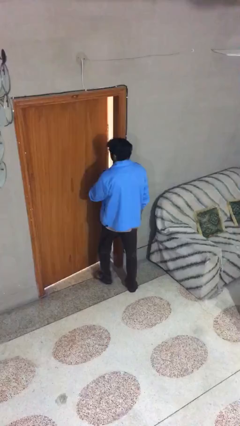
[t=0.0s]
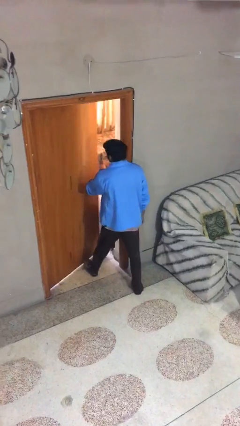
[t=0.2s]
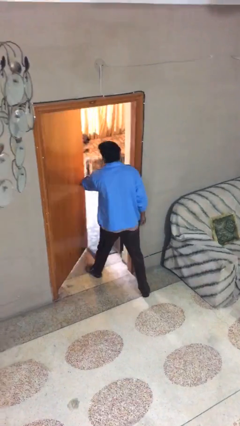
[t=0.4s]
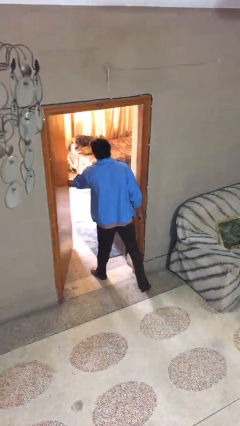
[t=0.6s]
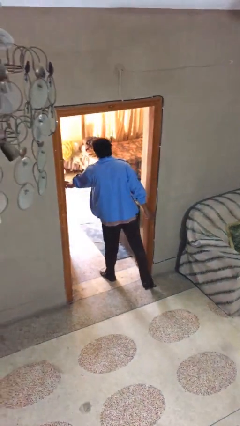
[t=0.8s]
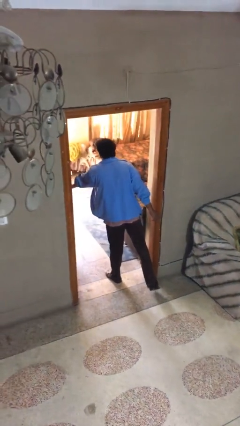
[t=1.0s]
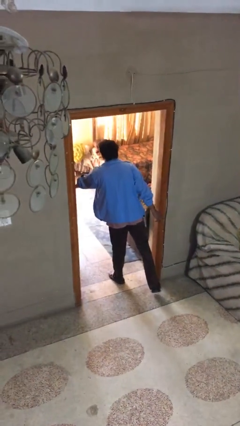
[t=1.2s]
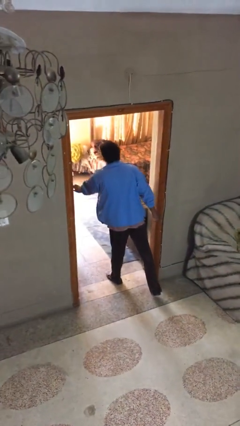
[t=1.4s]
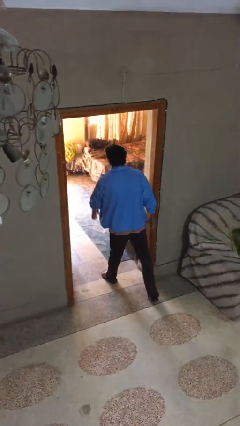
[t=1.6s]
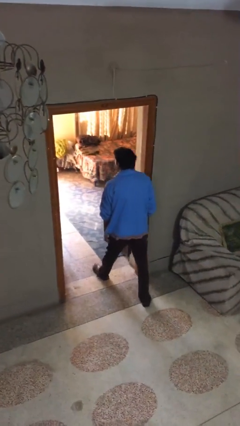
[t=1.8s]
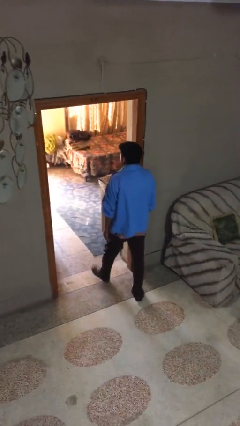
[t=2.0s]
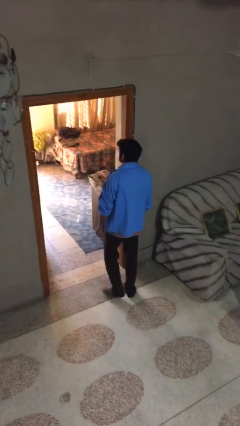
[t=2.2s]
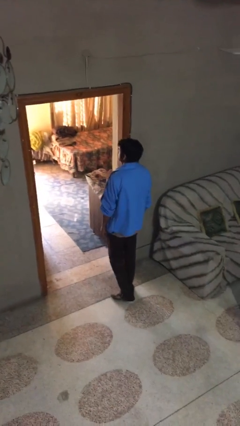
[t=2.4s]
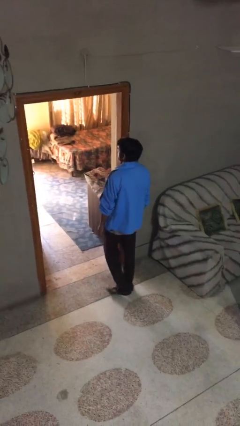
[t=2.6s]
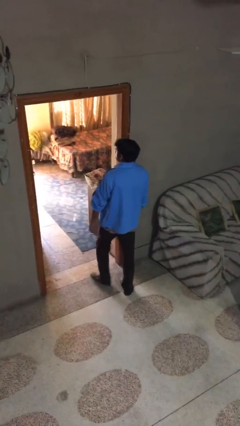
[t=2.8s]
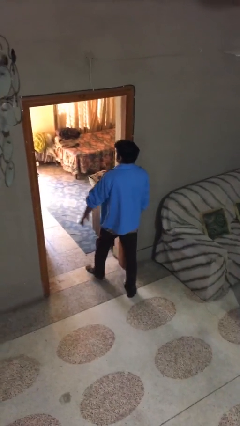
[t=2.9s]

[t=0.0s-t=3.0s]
person opens facility door

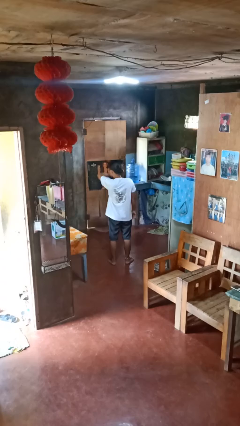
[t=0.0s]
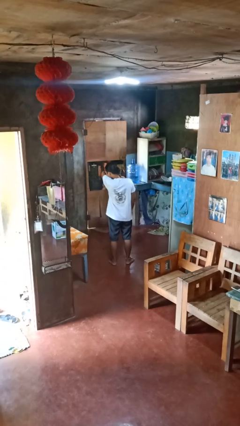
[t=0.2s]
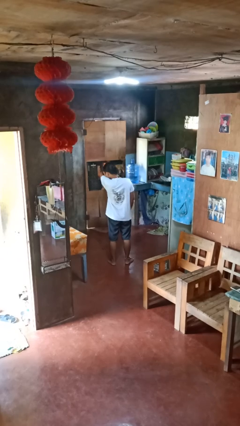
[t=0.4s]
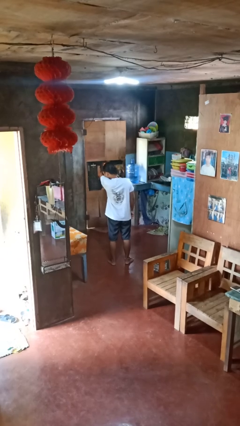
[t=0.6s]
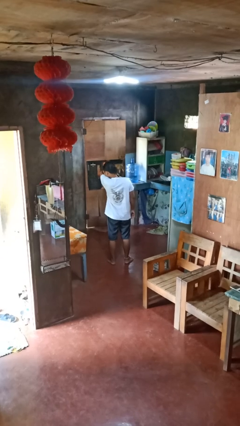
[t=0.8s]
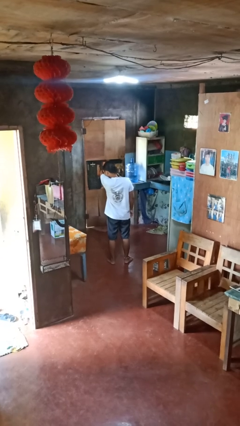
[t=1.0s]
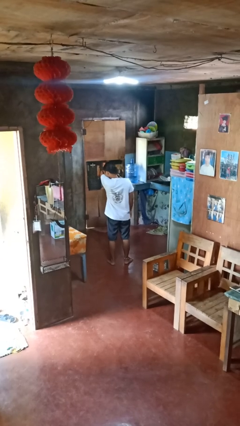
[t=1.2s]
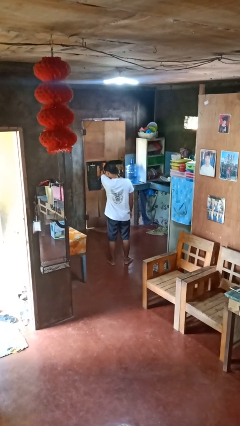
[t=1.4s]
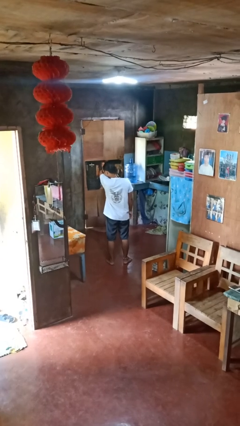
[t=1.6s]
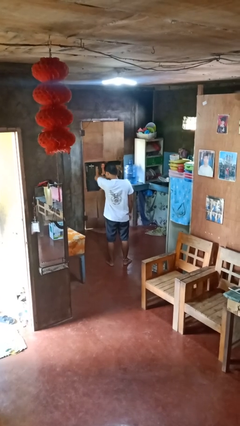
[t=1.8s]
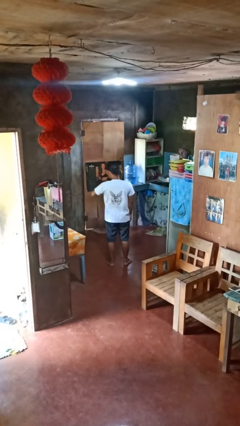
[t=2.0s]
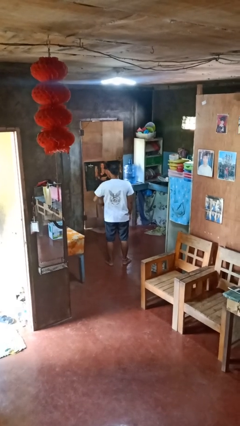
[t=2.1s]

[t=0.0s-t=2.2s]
person sneezes into arm

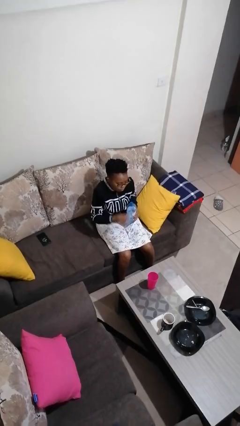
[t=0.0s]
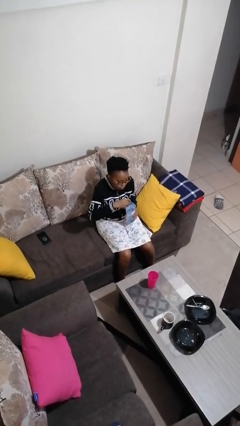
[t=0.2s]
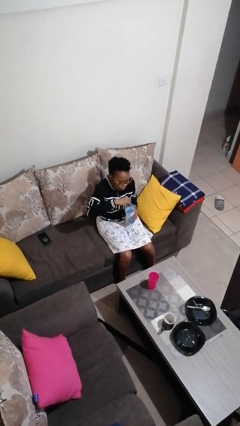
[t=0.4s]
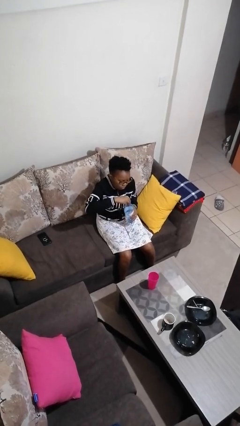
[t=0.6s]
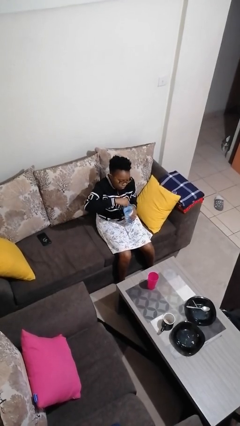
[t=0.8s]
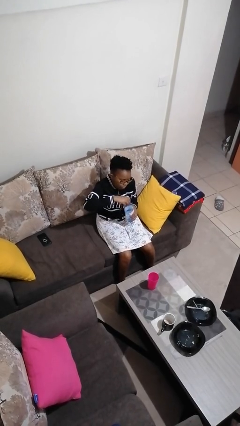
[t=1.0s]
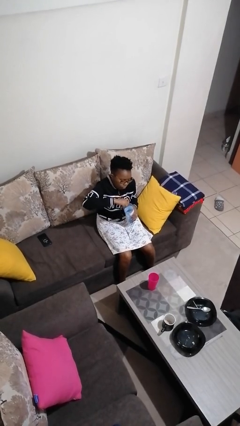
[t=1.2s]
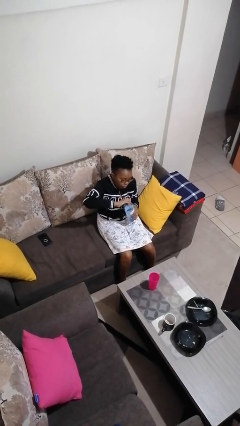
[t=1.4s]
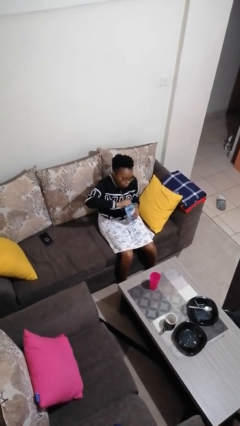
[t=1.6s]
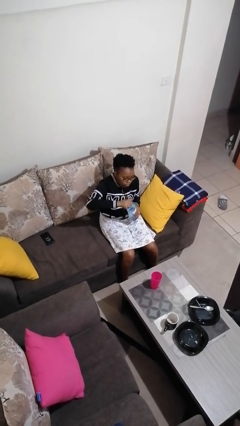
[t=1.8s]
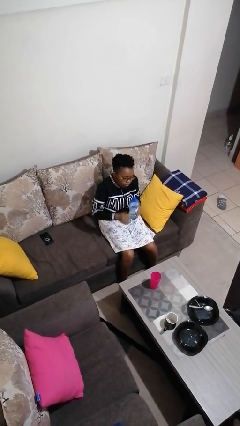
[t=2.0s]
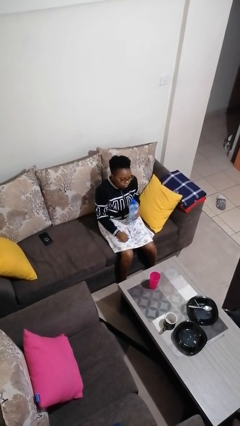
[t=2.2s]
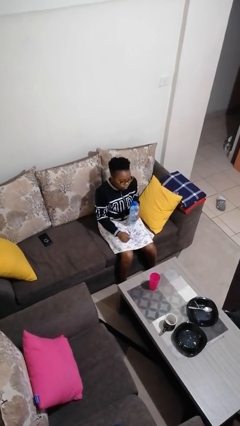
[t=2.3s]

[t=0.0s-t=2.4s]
person screws lid to bottle

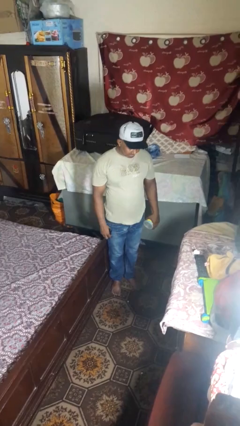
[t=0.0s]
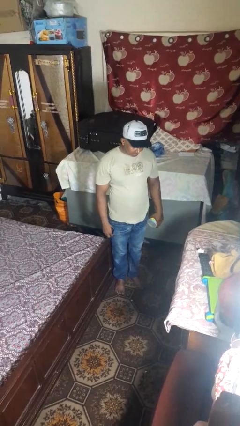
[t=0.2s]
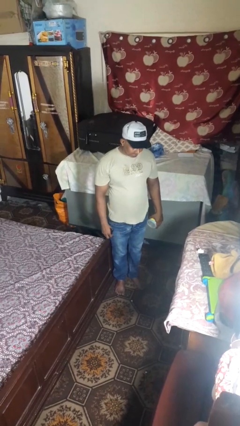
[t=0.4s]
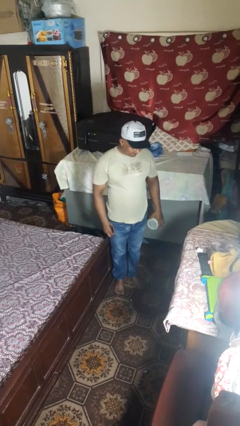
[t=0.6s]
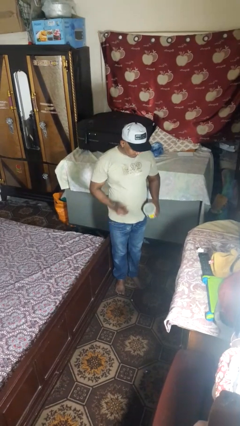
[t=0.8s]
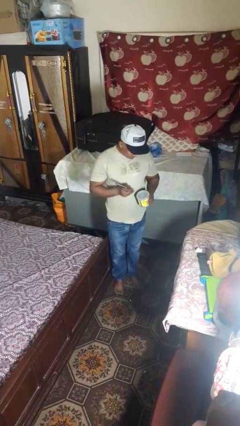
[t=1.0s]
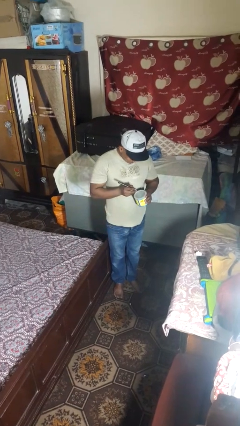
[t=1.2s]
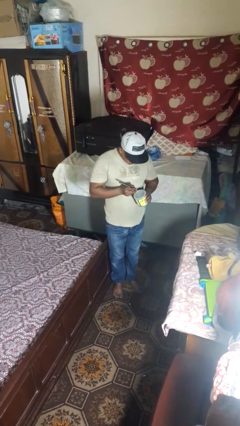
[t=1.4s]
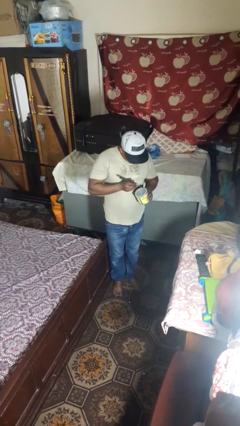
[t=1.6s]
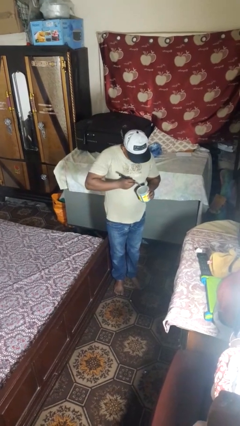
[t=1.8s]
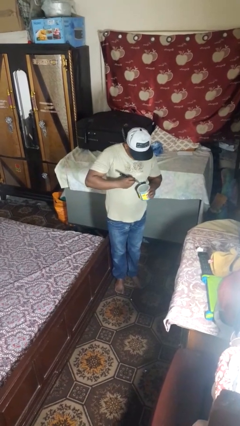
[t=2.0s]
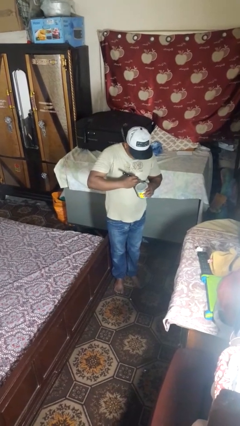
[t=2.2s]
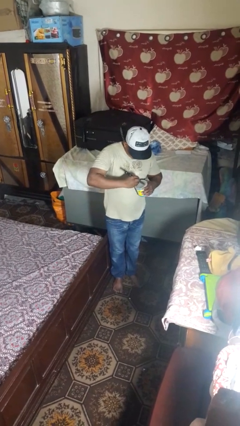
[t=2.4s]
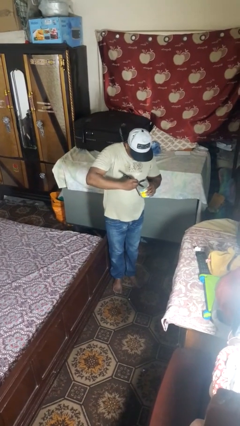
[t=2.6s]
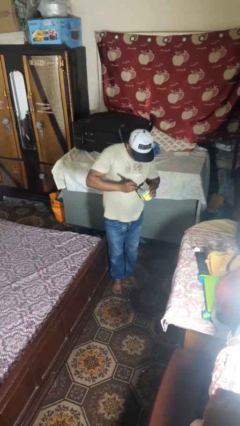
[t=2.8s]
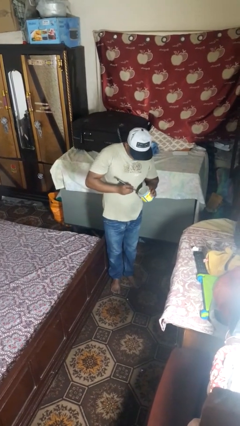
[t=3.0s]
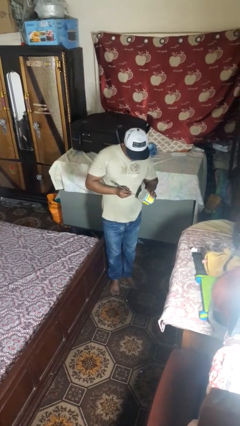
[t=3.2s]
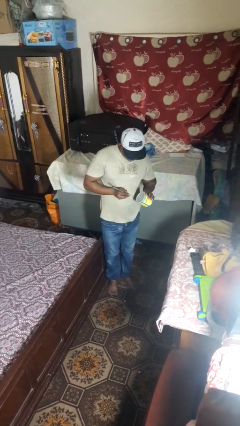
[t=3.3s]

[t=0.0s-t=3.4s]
person opens can with can opener

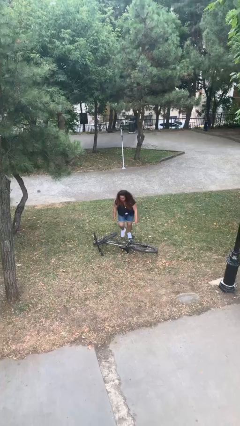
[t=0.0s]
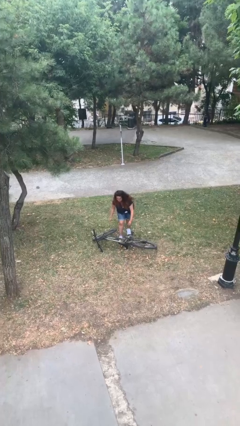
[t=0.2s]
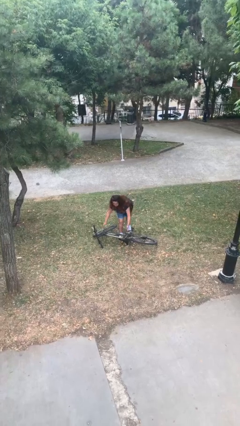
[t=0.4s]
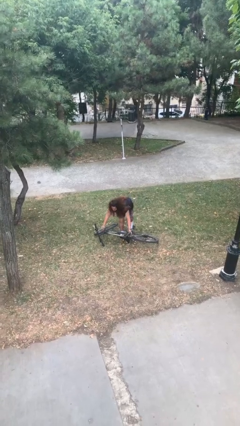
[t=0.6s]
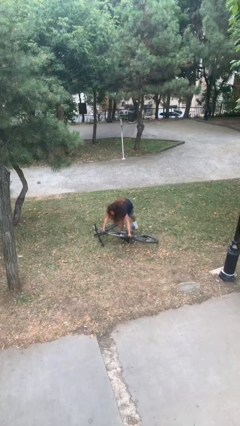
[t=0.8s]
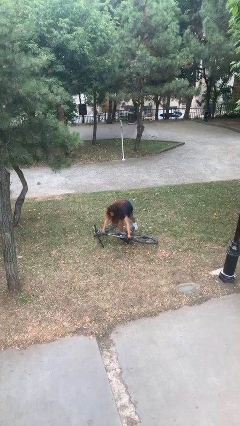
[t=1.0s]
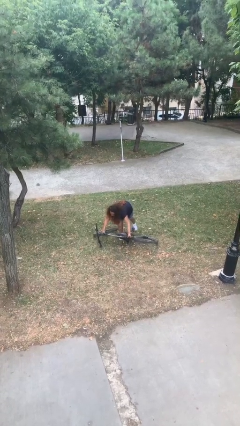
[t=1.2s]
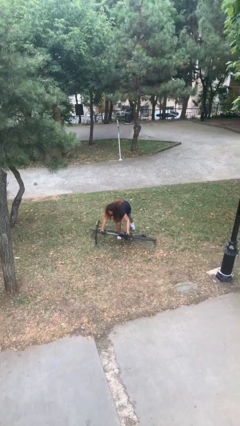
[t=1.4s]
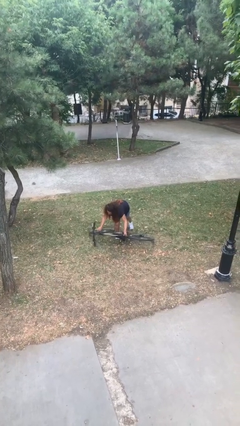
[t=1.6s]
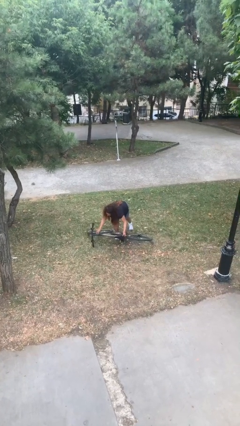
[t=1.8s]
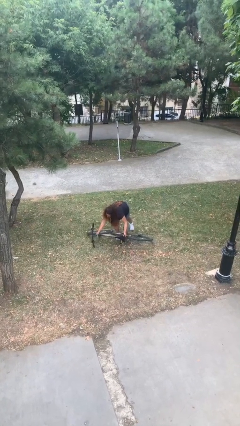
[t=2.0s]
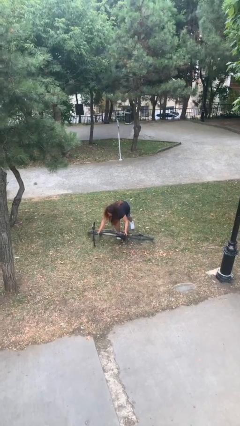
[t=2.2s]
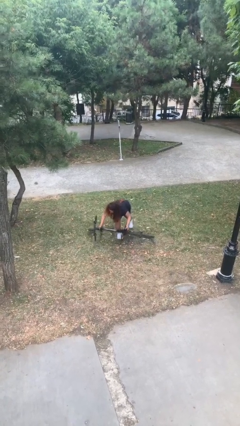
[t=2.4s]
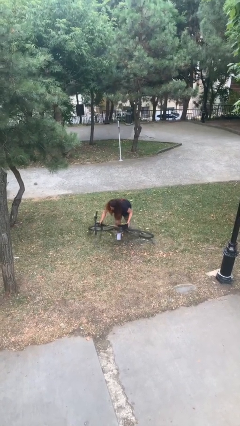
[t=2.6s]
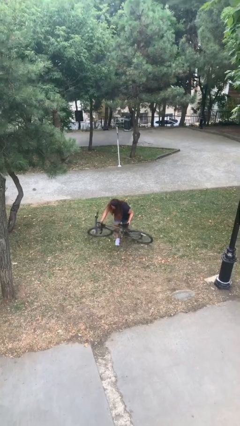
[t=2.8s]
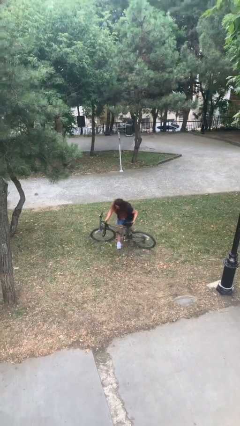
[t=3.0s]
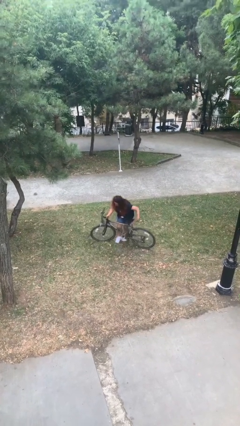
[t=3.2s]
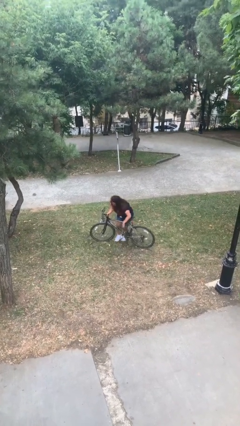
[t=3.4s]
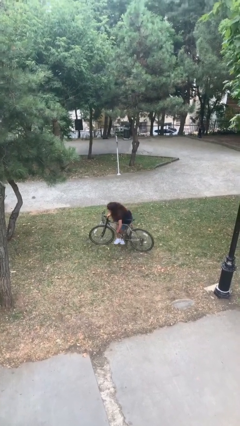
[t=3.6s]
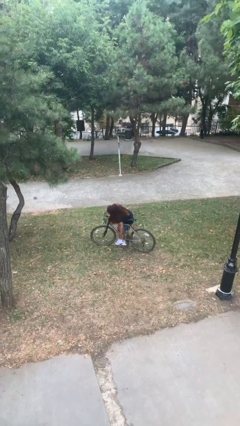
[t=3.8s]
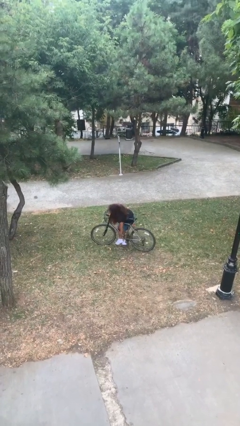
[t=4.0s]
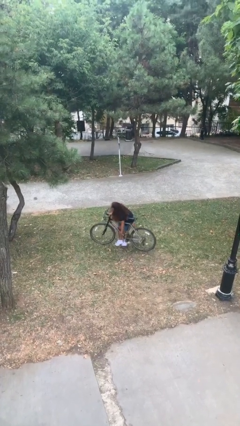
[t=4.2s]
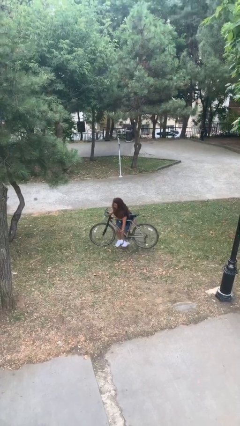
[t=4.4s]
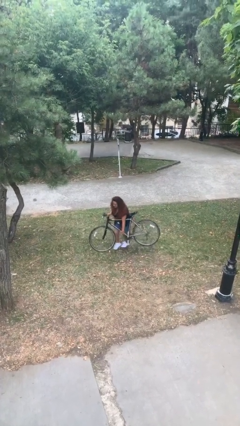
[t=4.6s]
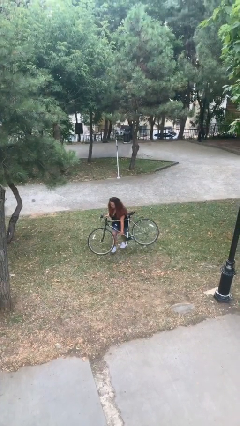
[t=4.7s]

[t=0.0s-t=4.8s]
person picks up object from floor

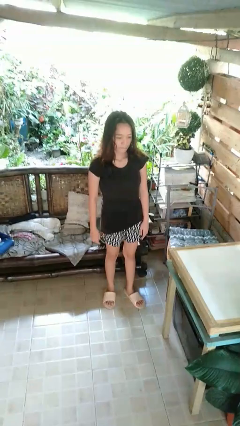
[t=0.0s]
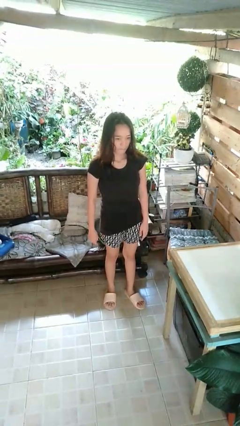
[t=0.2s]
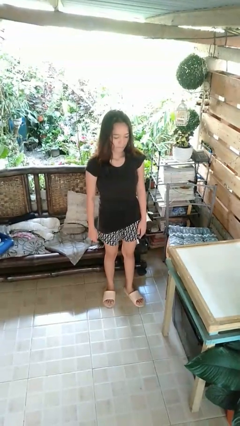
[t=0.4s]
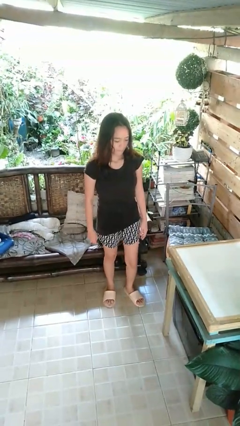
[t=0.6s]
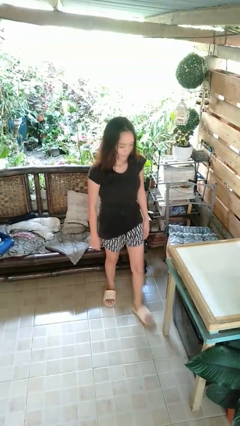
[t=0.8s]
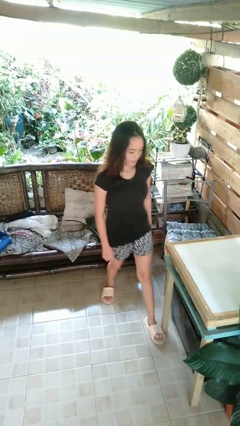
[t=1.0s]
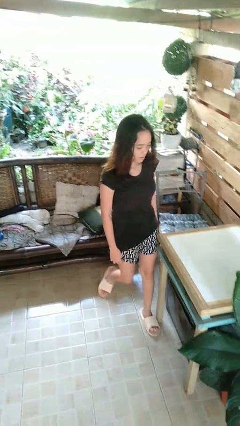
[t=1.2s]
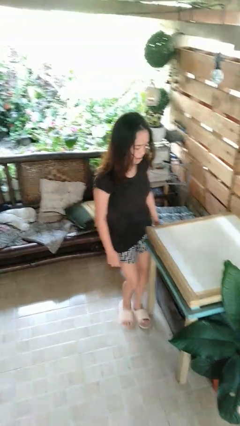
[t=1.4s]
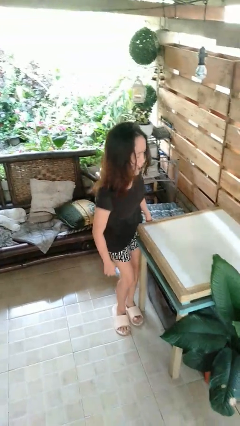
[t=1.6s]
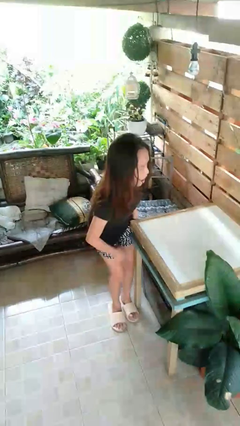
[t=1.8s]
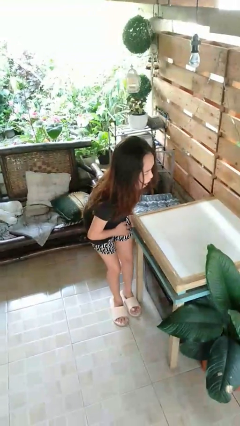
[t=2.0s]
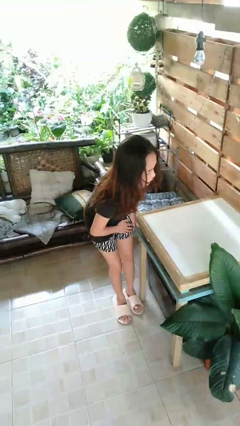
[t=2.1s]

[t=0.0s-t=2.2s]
person bumps into table
